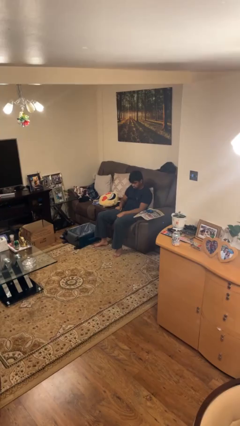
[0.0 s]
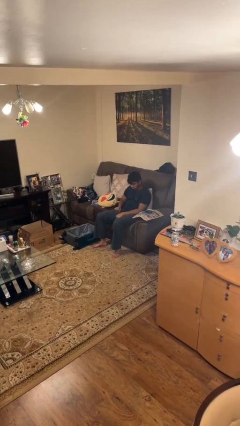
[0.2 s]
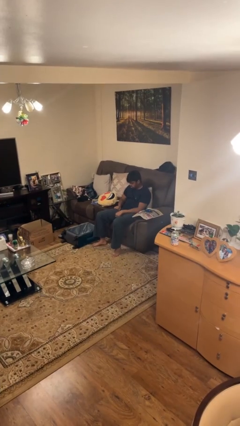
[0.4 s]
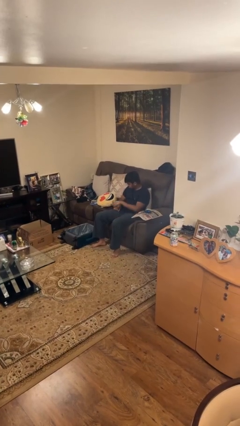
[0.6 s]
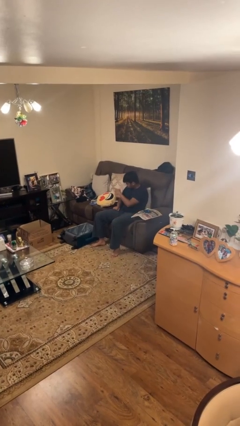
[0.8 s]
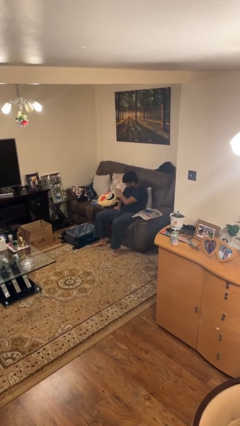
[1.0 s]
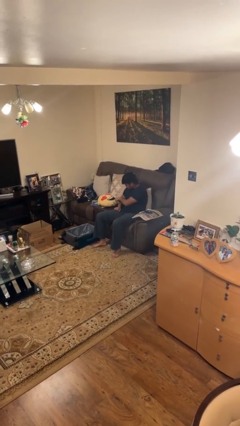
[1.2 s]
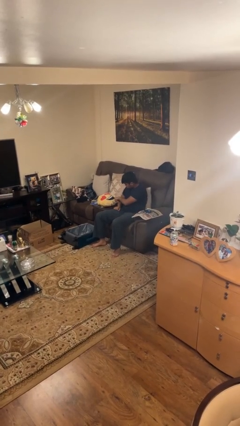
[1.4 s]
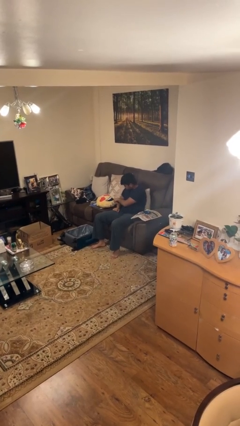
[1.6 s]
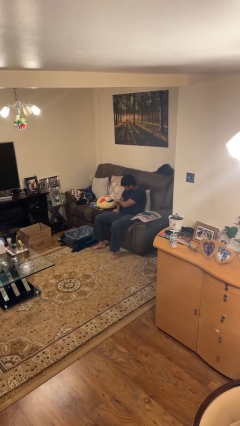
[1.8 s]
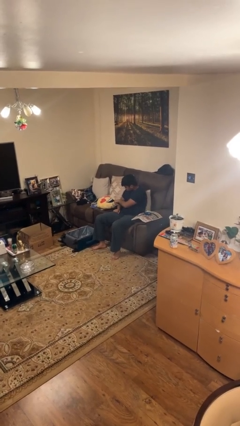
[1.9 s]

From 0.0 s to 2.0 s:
person taps object with finger

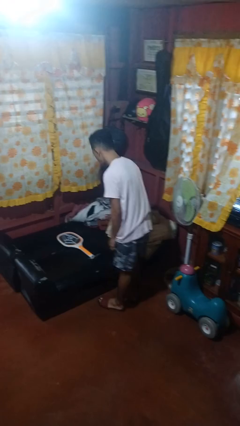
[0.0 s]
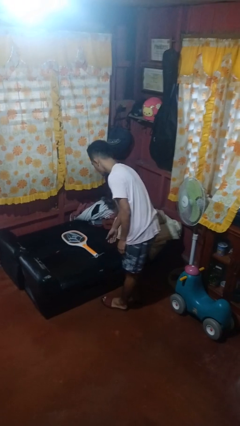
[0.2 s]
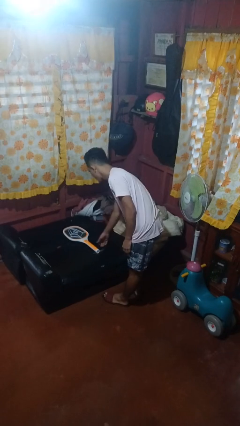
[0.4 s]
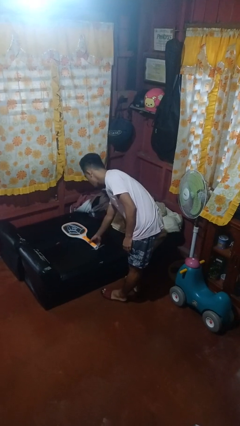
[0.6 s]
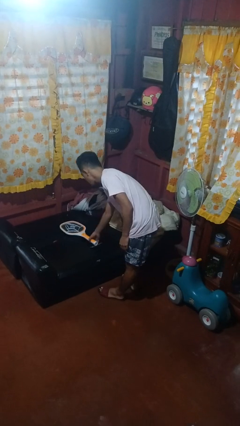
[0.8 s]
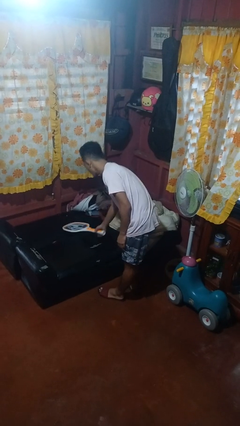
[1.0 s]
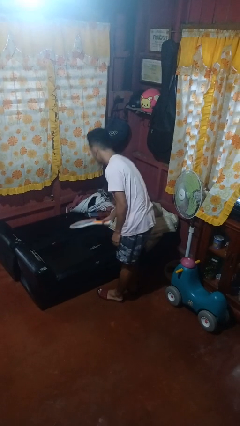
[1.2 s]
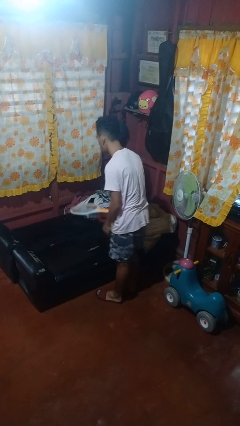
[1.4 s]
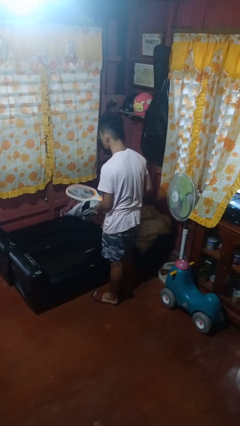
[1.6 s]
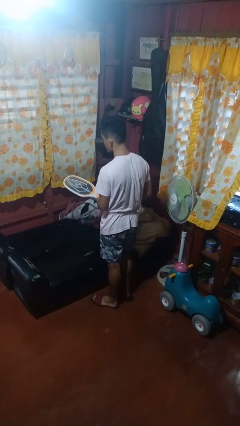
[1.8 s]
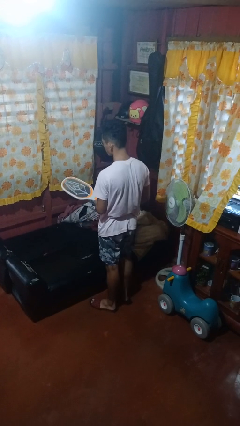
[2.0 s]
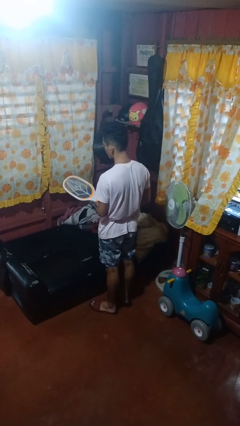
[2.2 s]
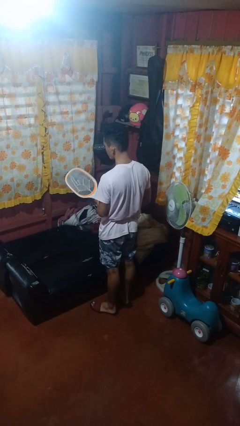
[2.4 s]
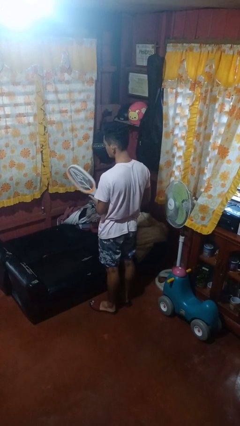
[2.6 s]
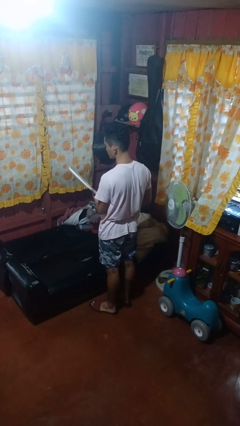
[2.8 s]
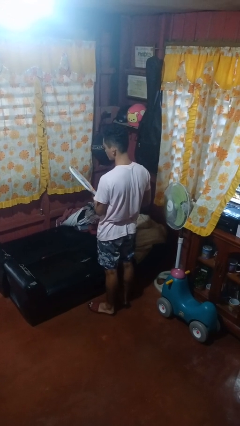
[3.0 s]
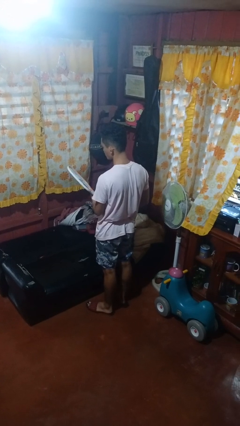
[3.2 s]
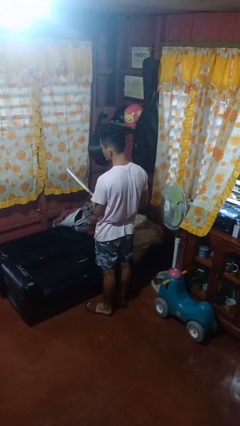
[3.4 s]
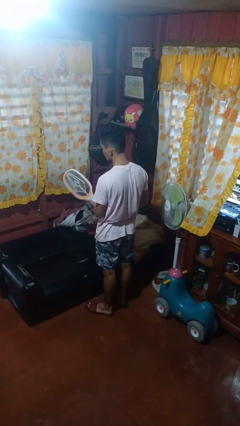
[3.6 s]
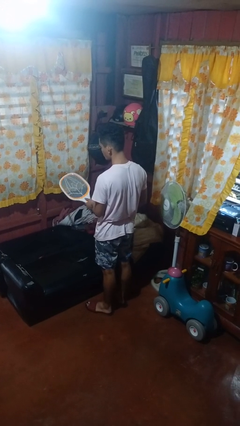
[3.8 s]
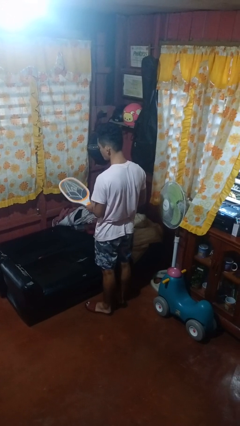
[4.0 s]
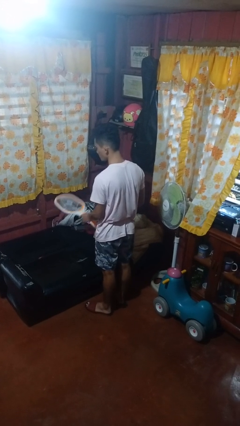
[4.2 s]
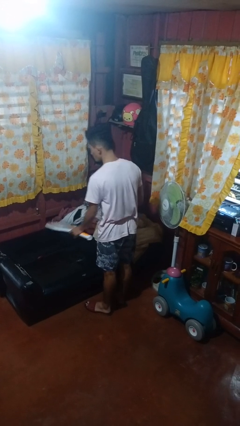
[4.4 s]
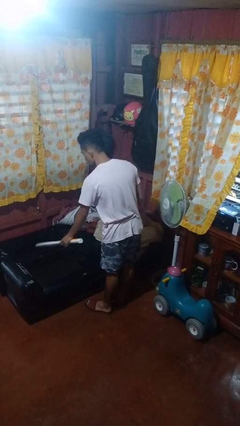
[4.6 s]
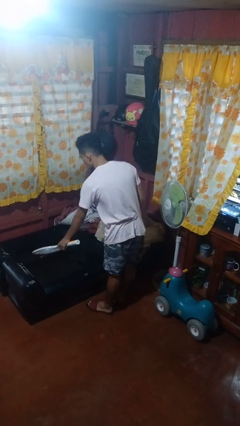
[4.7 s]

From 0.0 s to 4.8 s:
person picks up object from couch

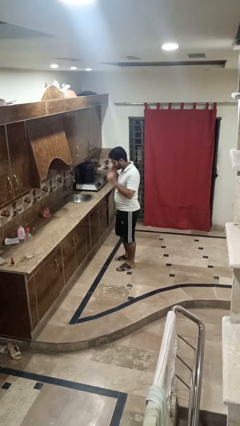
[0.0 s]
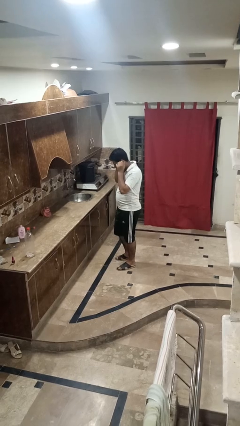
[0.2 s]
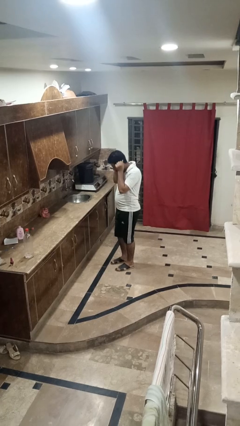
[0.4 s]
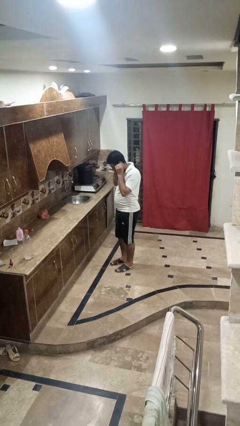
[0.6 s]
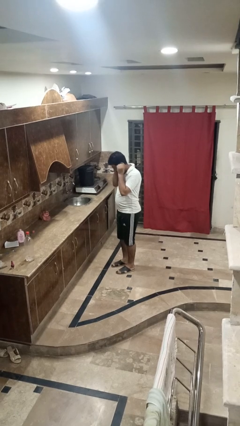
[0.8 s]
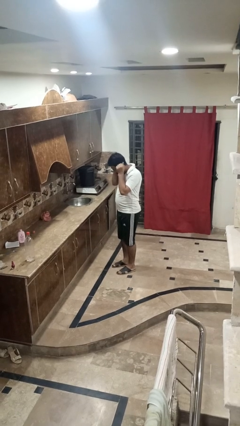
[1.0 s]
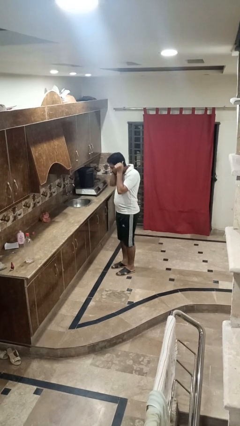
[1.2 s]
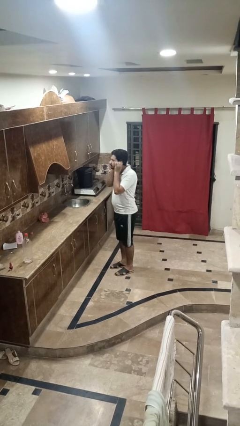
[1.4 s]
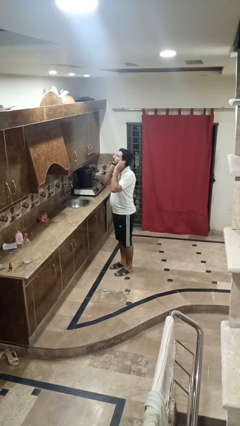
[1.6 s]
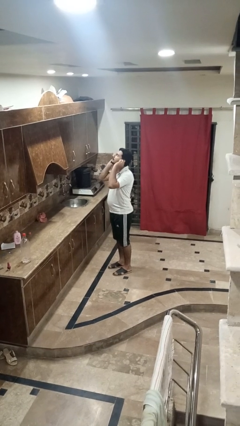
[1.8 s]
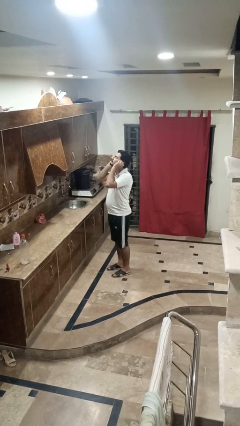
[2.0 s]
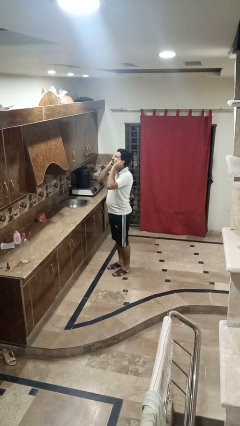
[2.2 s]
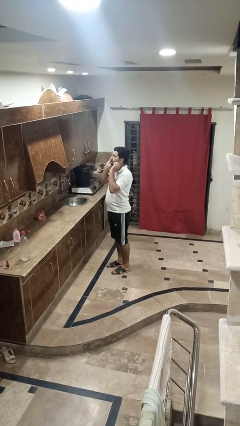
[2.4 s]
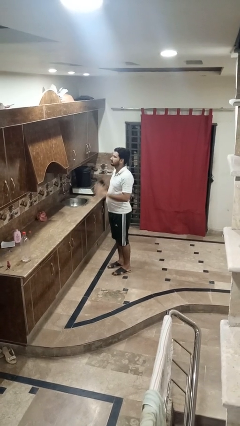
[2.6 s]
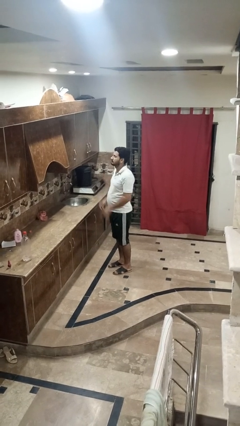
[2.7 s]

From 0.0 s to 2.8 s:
person touches earlobe

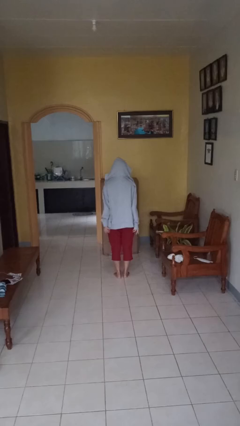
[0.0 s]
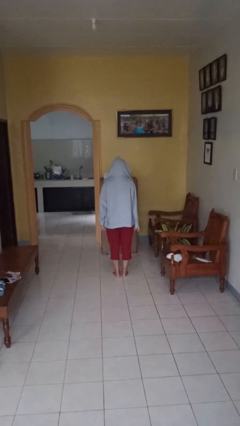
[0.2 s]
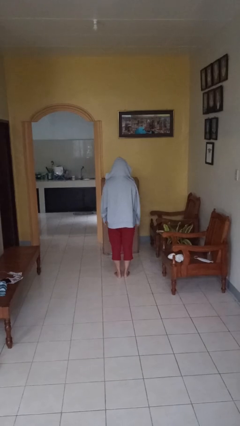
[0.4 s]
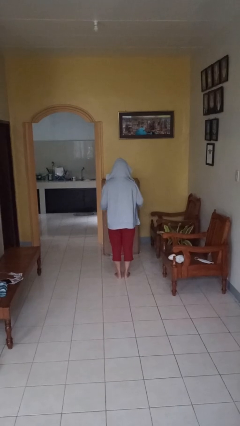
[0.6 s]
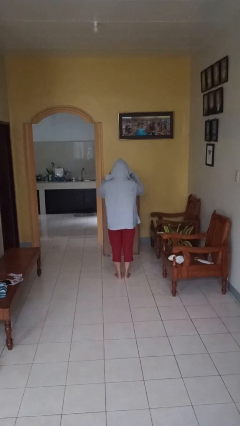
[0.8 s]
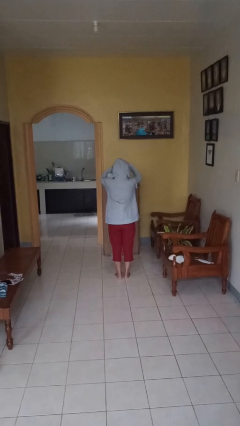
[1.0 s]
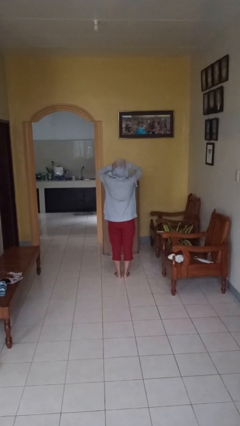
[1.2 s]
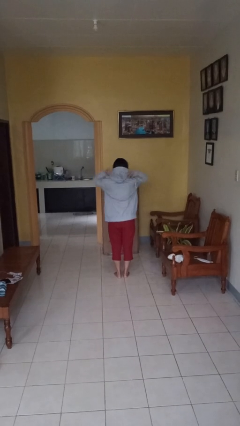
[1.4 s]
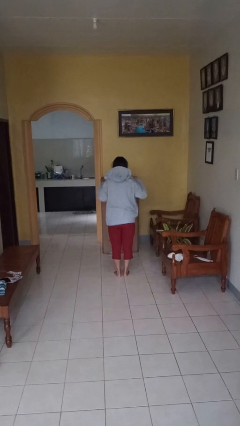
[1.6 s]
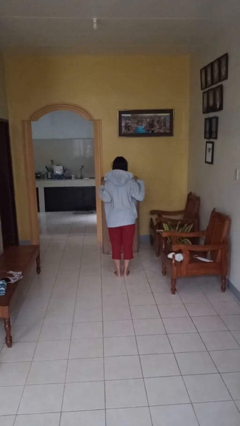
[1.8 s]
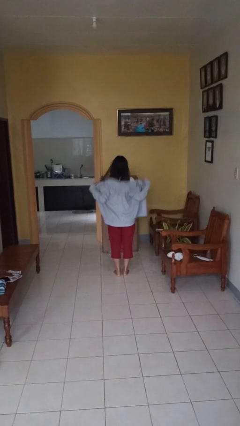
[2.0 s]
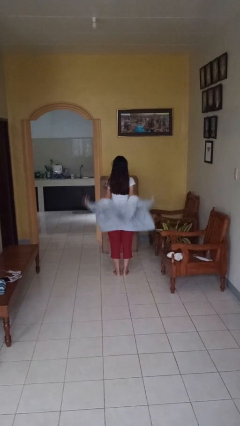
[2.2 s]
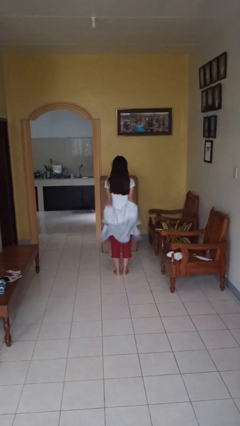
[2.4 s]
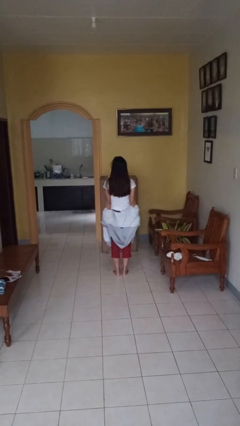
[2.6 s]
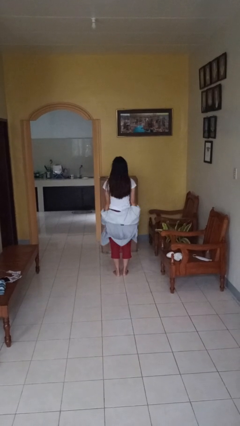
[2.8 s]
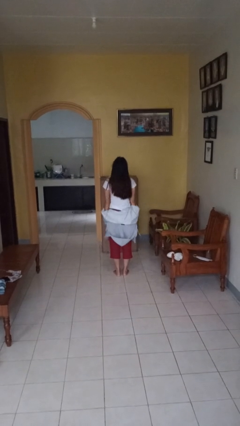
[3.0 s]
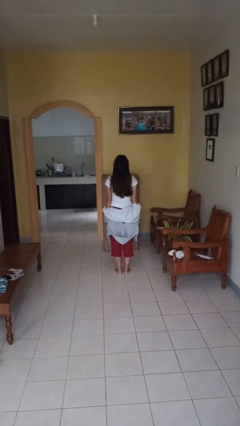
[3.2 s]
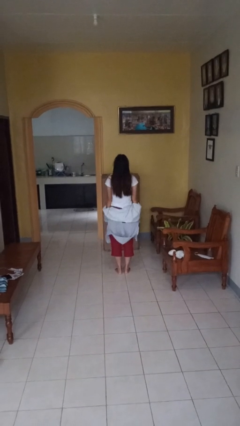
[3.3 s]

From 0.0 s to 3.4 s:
person takes off hoodie

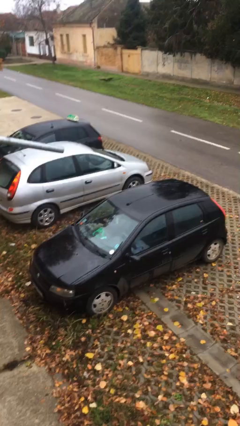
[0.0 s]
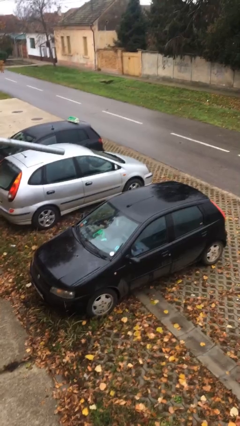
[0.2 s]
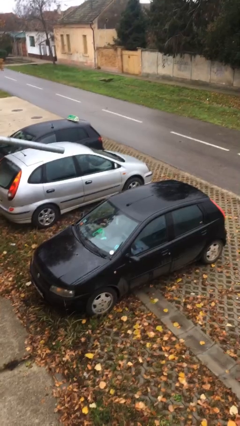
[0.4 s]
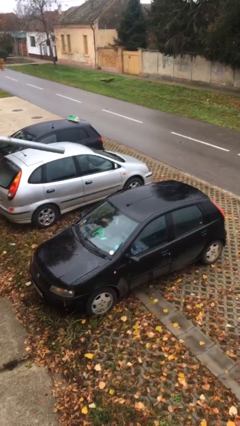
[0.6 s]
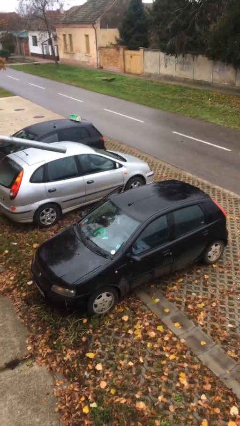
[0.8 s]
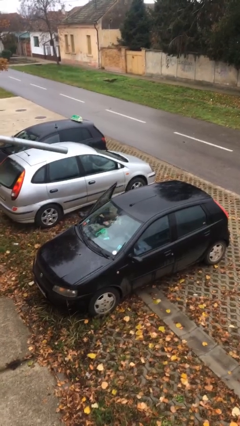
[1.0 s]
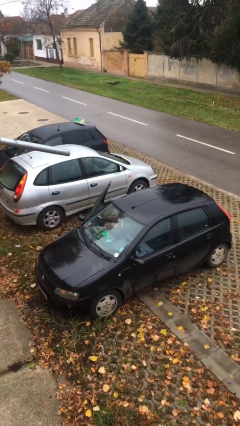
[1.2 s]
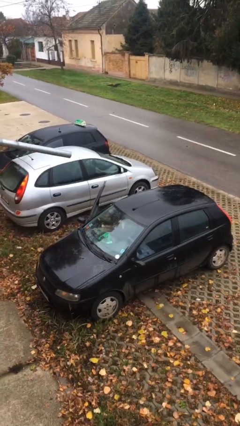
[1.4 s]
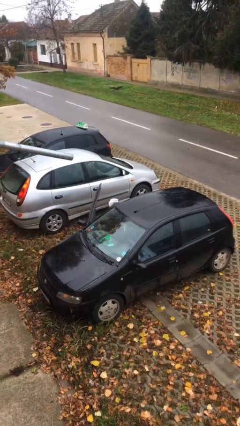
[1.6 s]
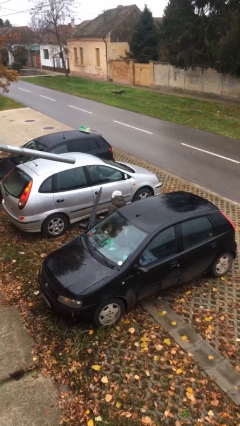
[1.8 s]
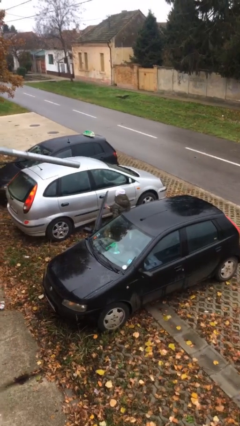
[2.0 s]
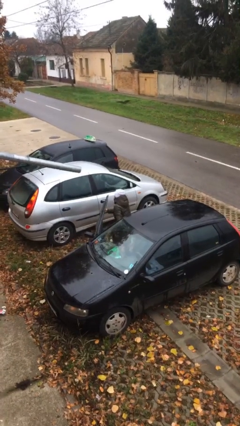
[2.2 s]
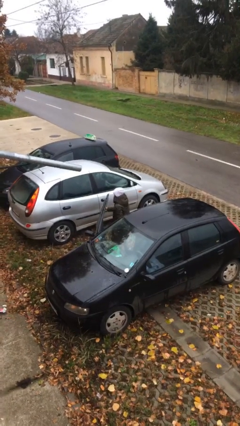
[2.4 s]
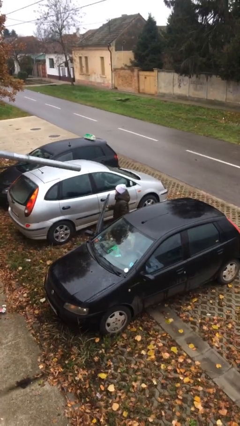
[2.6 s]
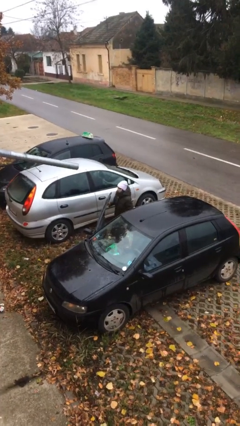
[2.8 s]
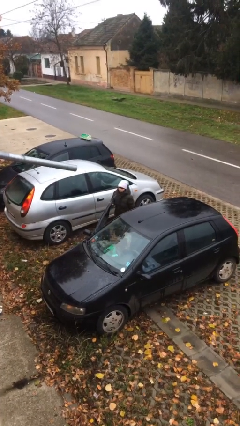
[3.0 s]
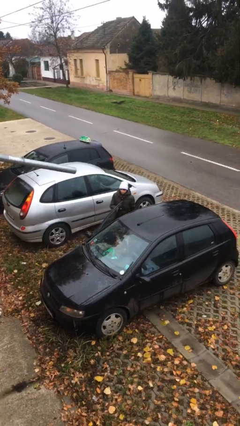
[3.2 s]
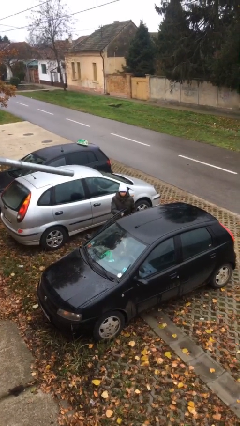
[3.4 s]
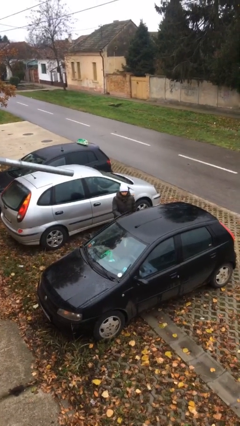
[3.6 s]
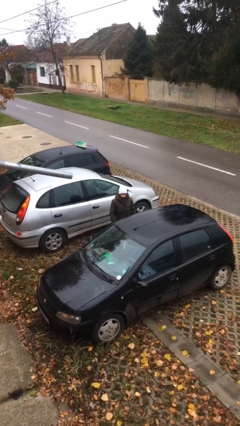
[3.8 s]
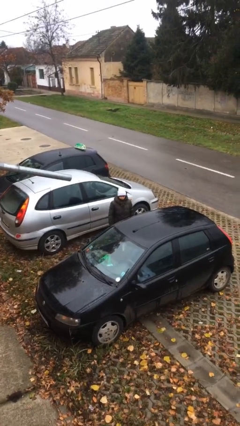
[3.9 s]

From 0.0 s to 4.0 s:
person exits car

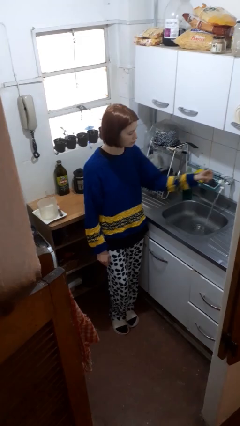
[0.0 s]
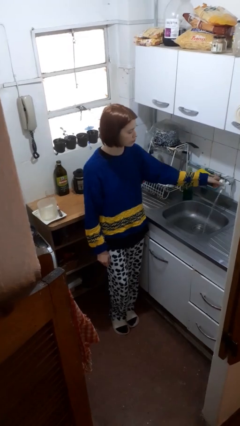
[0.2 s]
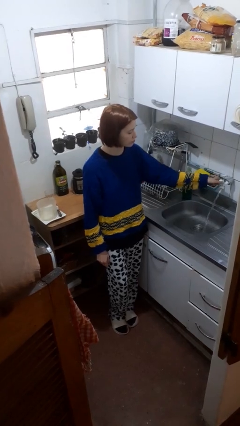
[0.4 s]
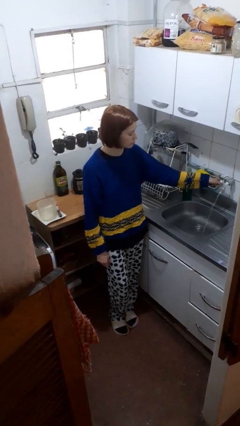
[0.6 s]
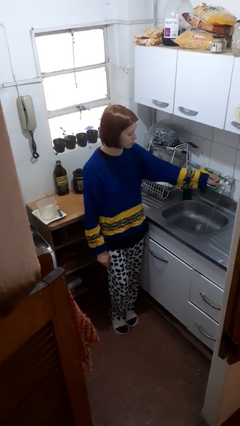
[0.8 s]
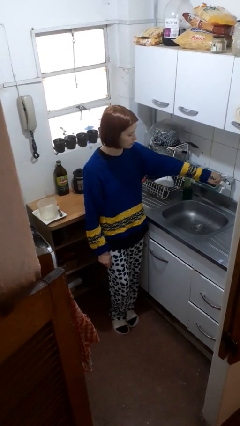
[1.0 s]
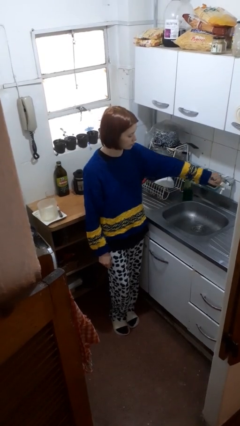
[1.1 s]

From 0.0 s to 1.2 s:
person turns off faucet
